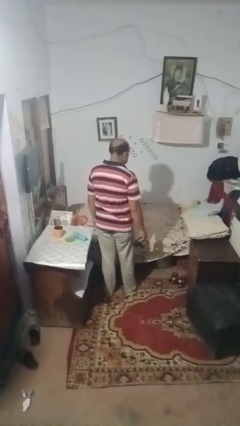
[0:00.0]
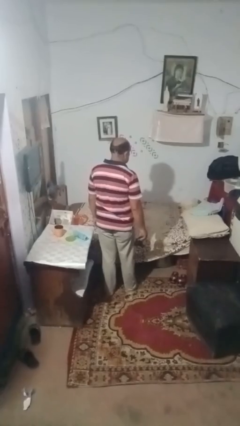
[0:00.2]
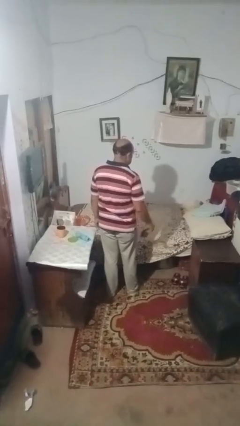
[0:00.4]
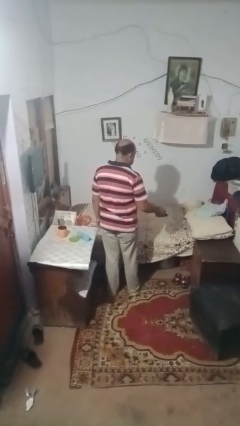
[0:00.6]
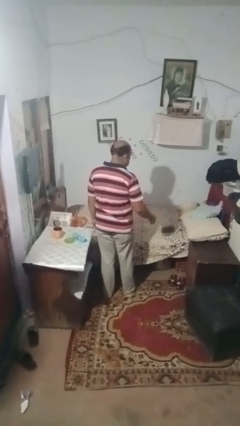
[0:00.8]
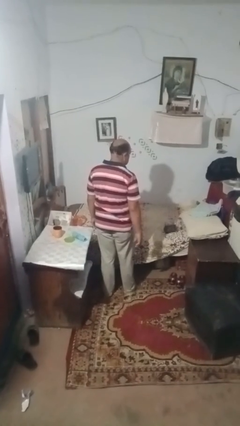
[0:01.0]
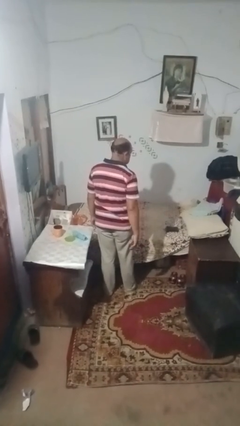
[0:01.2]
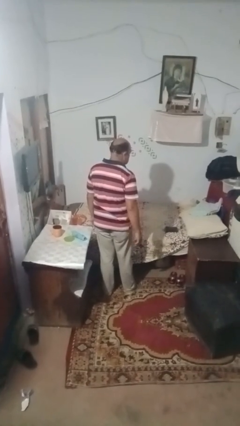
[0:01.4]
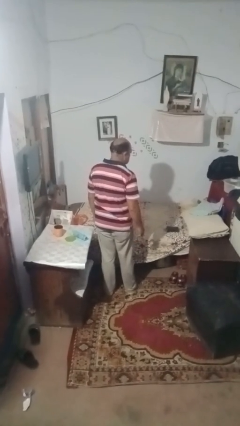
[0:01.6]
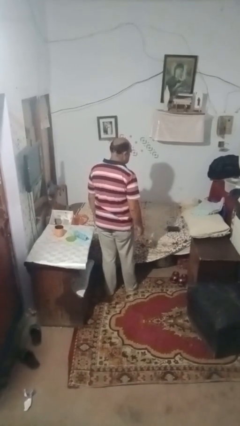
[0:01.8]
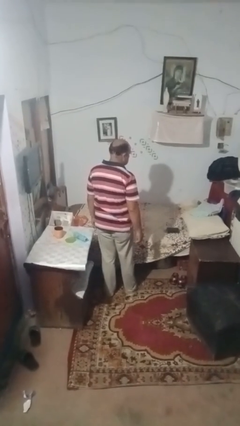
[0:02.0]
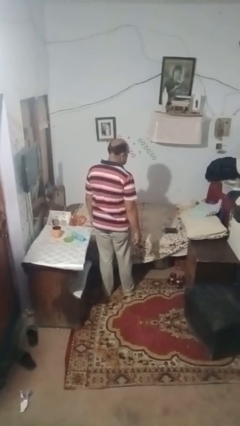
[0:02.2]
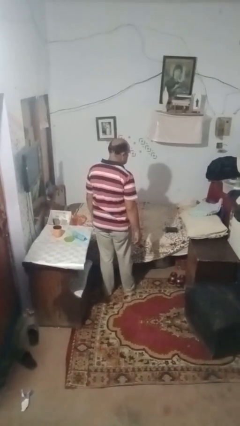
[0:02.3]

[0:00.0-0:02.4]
person throws object on bed

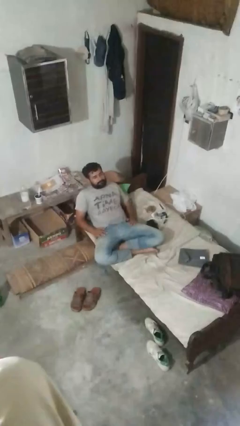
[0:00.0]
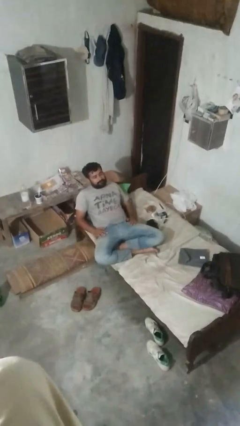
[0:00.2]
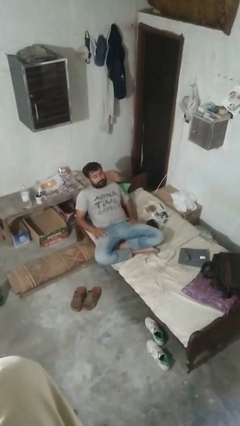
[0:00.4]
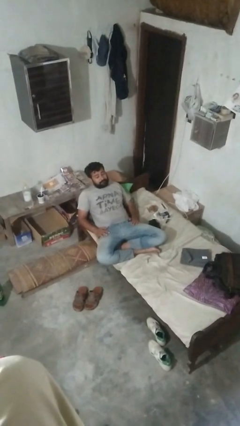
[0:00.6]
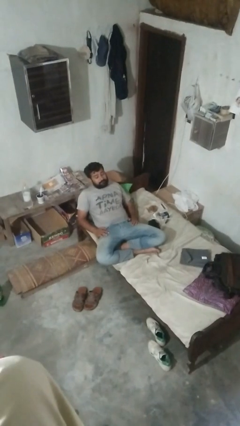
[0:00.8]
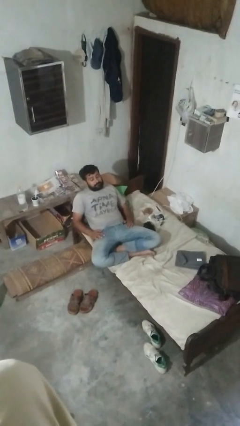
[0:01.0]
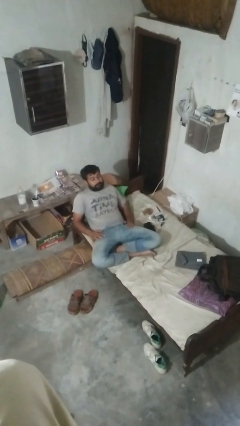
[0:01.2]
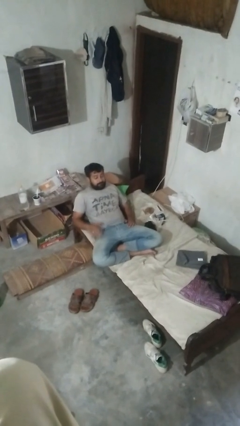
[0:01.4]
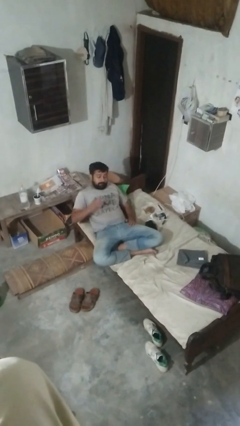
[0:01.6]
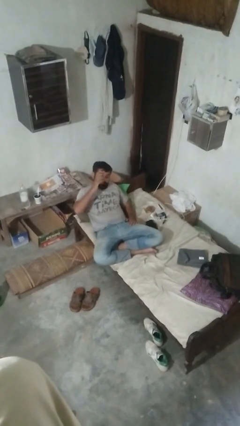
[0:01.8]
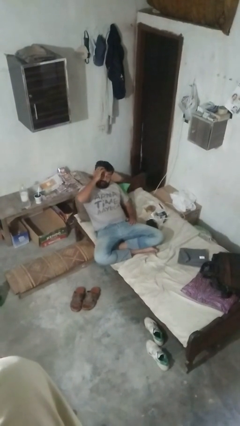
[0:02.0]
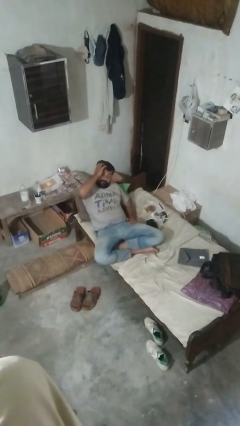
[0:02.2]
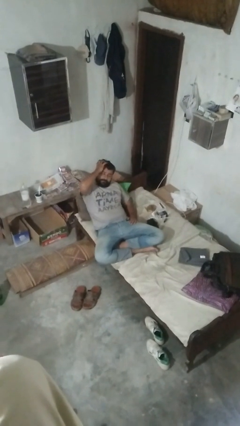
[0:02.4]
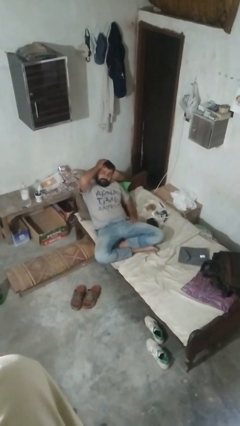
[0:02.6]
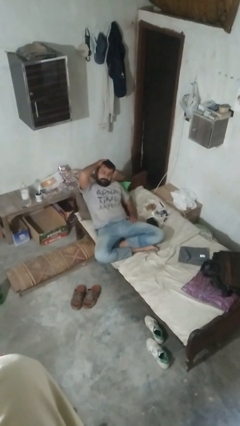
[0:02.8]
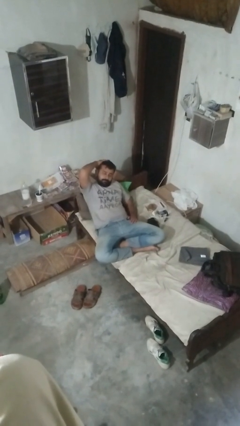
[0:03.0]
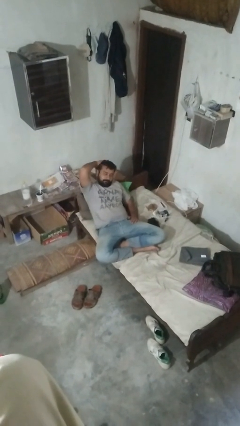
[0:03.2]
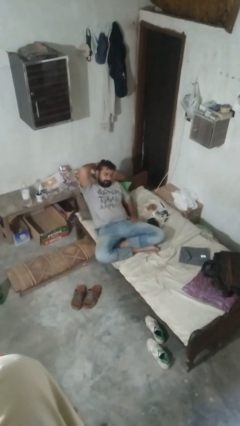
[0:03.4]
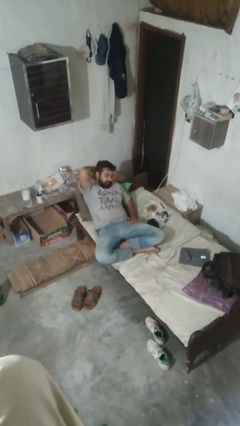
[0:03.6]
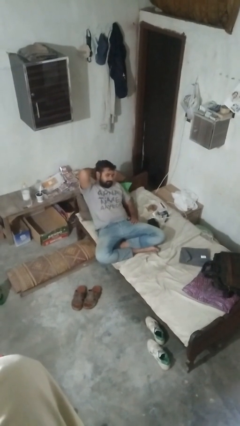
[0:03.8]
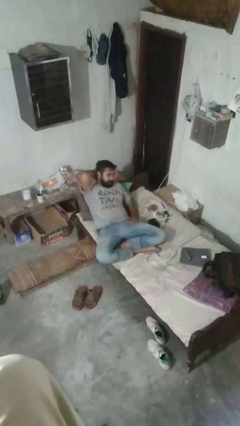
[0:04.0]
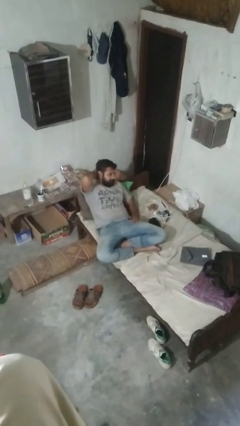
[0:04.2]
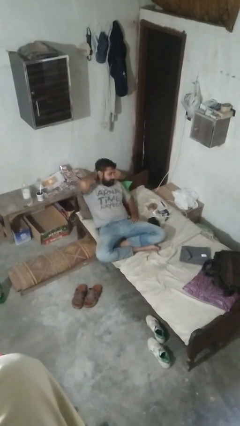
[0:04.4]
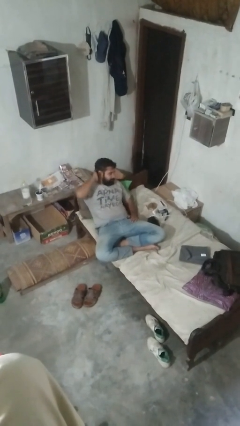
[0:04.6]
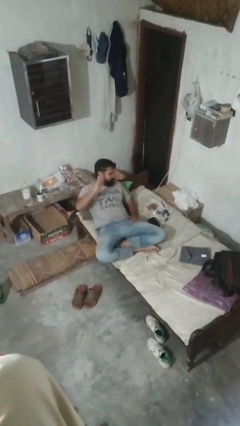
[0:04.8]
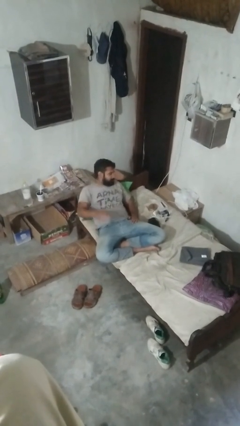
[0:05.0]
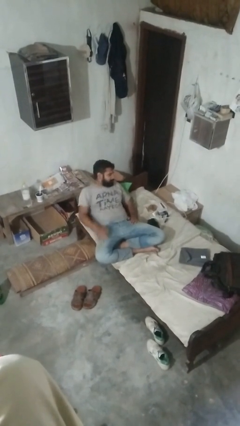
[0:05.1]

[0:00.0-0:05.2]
person strokes hair

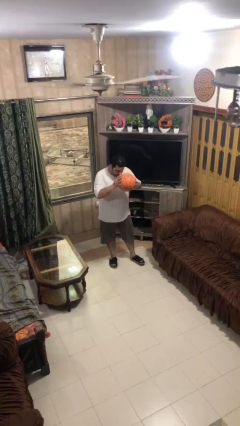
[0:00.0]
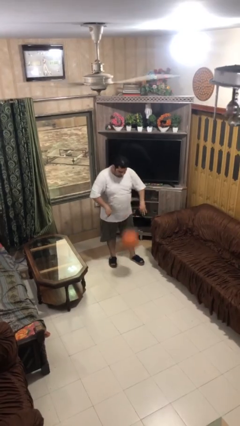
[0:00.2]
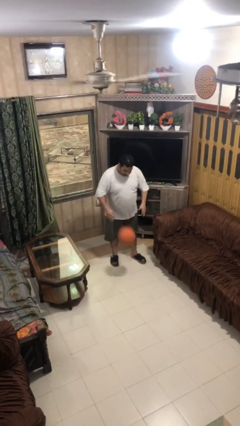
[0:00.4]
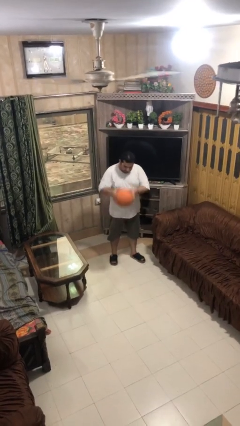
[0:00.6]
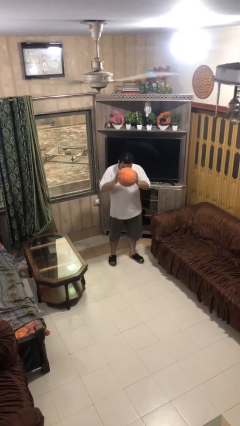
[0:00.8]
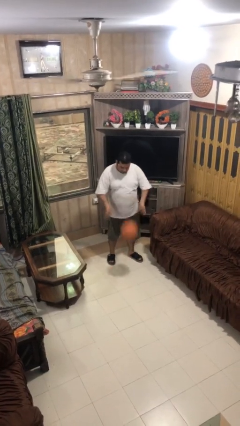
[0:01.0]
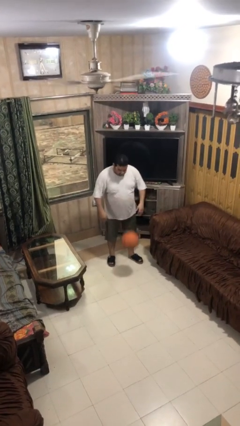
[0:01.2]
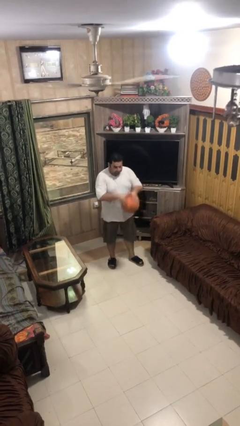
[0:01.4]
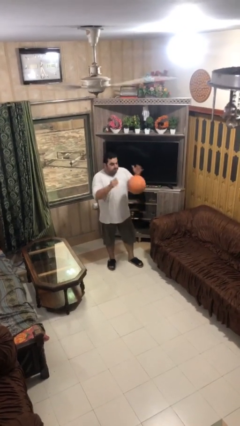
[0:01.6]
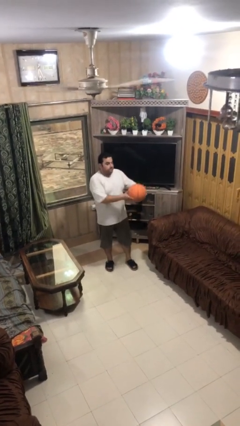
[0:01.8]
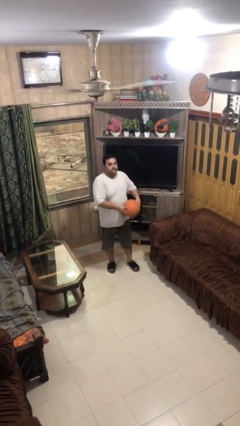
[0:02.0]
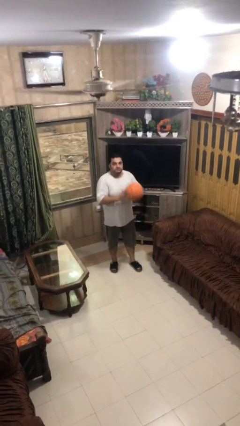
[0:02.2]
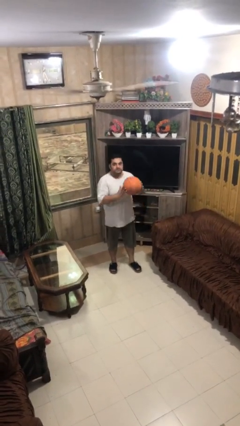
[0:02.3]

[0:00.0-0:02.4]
person bounces ball on floor

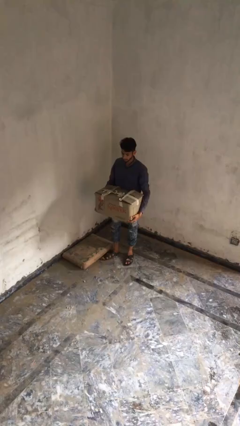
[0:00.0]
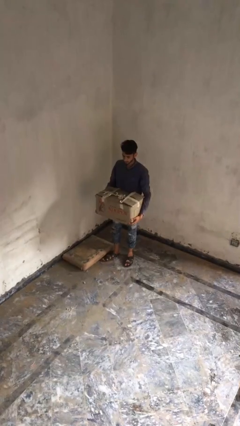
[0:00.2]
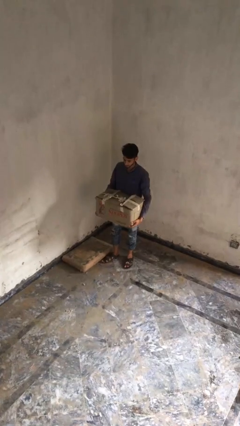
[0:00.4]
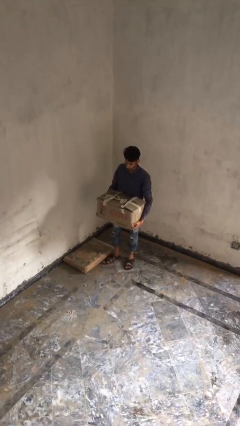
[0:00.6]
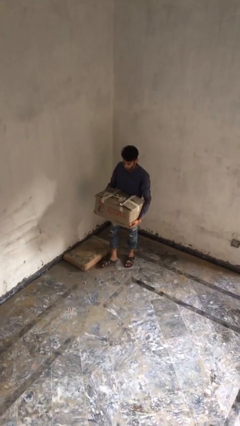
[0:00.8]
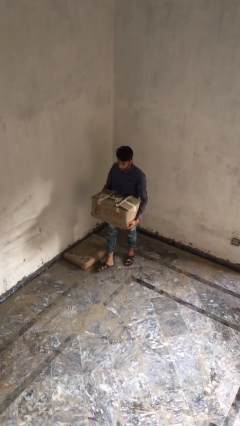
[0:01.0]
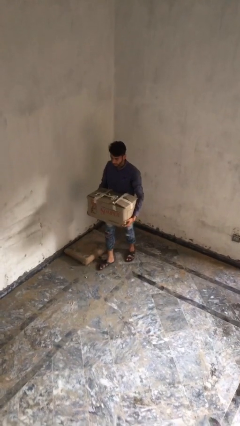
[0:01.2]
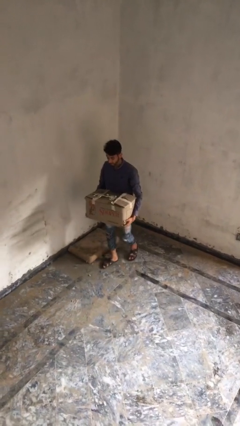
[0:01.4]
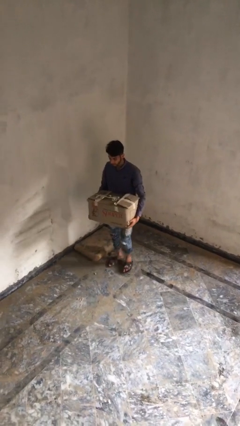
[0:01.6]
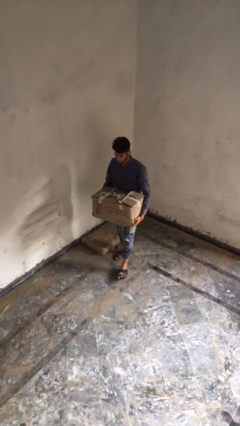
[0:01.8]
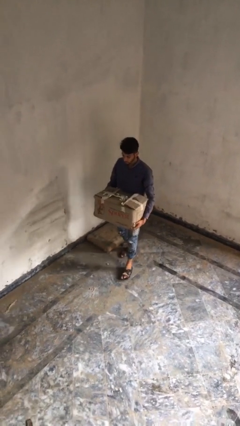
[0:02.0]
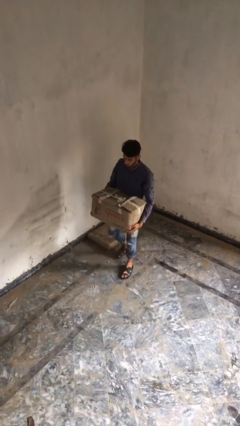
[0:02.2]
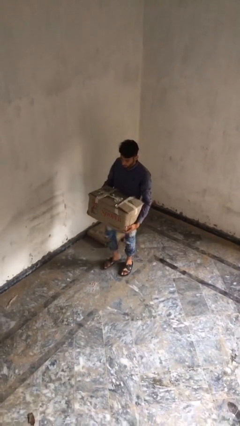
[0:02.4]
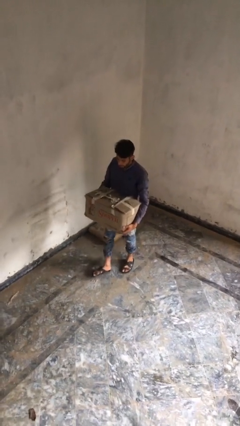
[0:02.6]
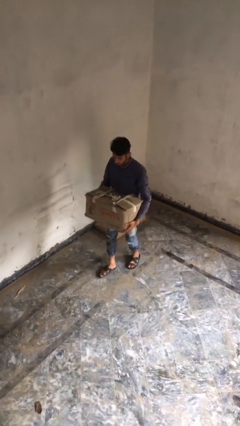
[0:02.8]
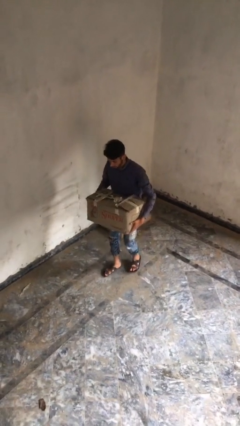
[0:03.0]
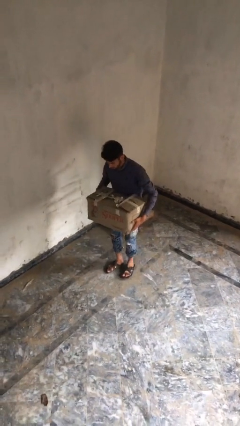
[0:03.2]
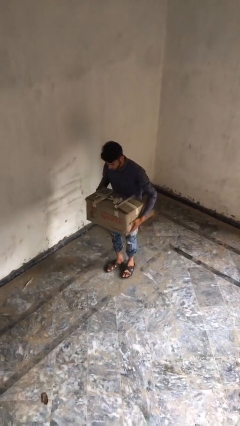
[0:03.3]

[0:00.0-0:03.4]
person carries heavy object

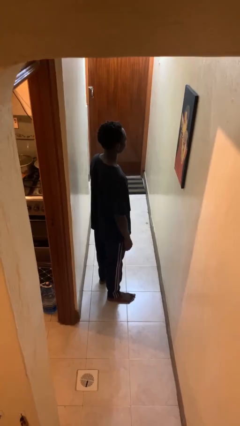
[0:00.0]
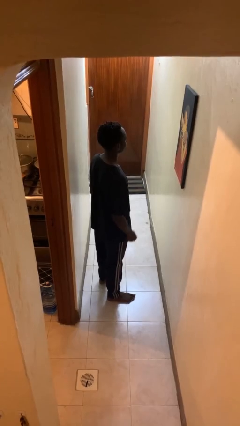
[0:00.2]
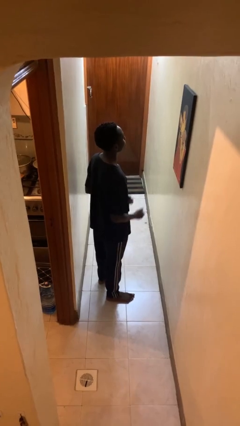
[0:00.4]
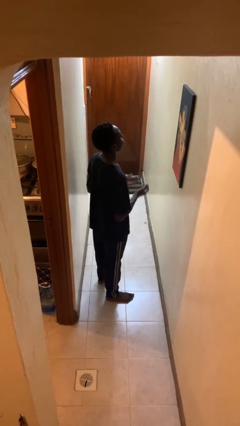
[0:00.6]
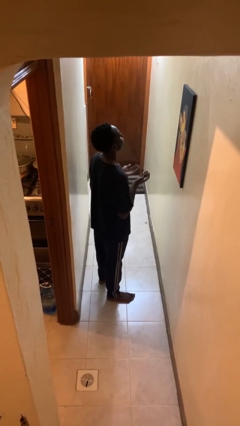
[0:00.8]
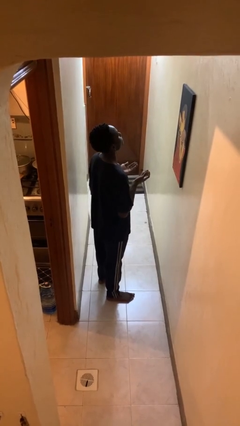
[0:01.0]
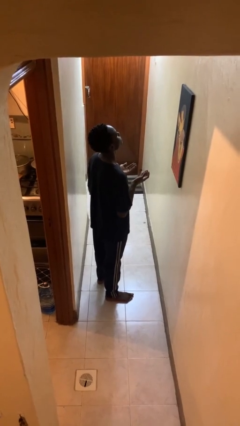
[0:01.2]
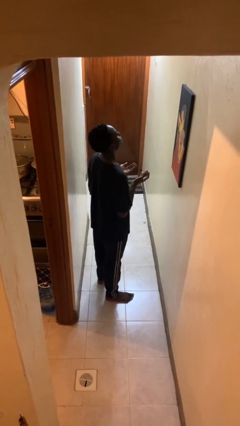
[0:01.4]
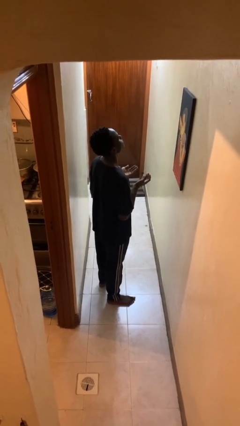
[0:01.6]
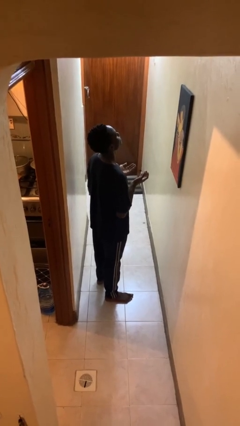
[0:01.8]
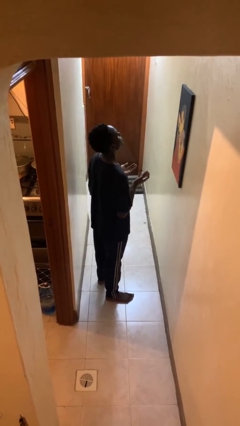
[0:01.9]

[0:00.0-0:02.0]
person prays

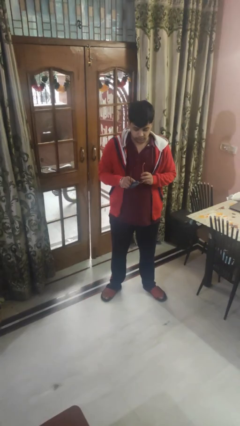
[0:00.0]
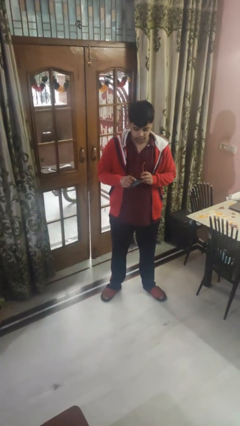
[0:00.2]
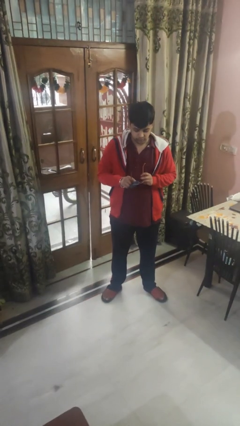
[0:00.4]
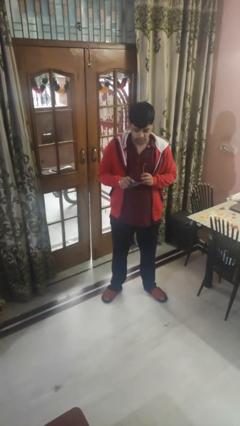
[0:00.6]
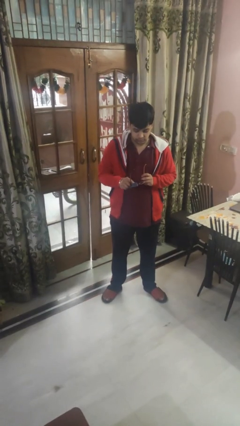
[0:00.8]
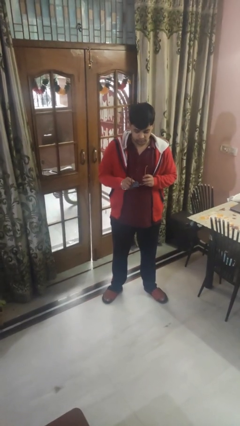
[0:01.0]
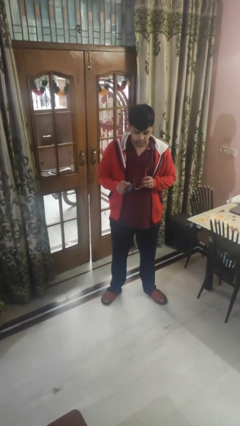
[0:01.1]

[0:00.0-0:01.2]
person cleans eyeglasses

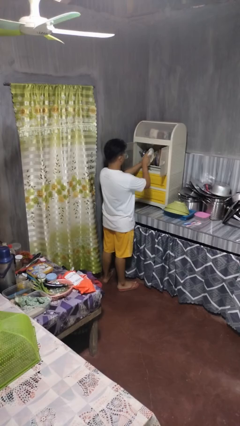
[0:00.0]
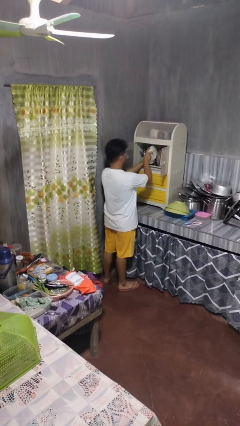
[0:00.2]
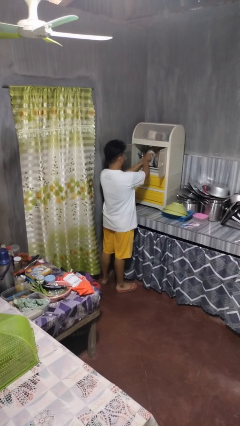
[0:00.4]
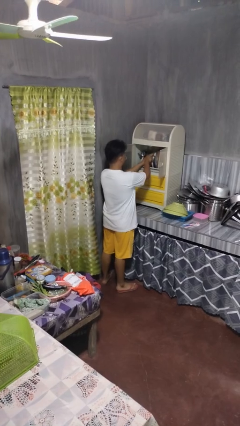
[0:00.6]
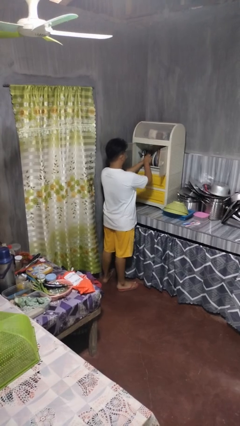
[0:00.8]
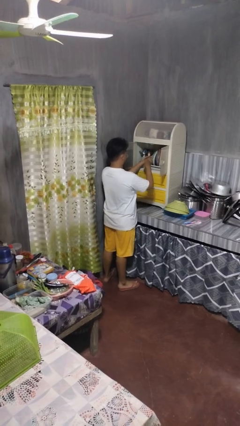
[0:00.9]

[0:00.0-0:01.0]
person puts object in cabinet
